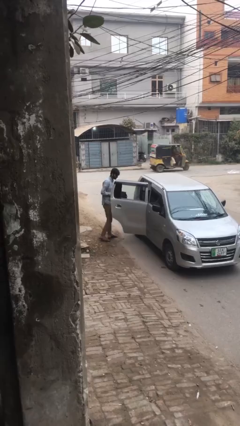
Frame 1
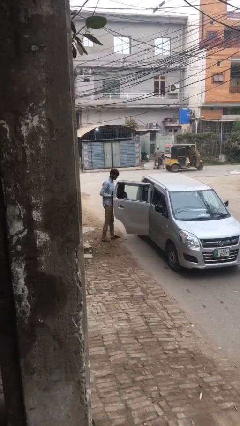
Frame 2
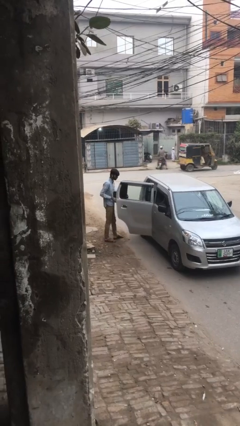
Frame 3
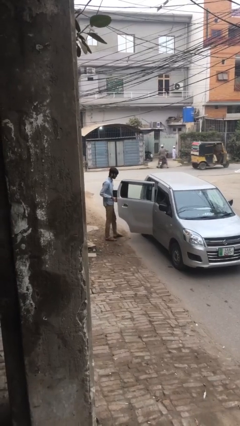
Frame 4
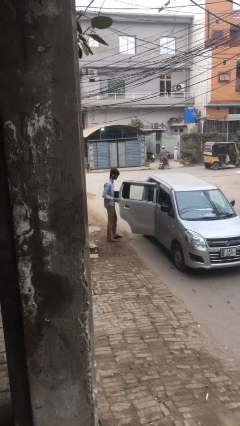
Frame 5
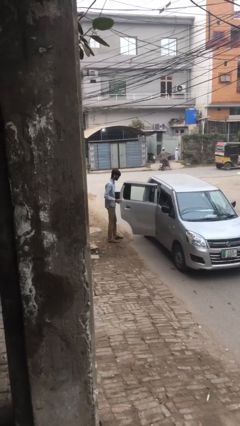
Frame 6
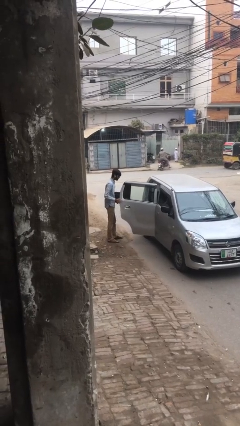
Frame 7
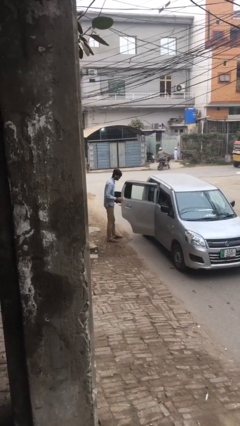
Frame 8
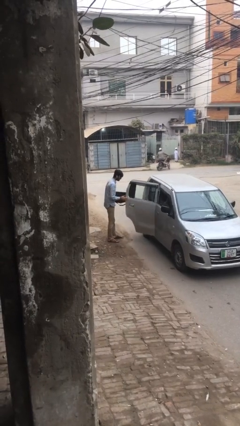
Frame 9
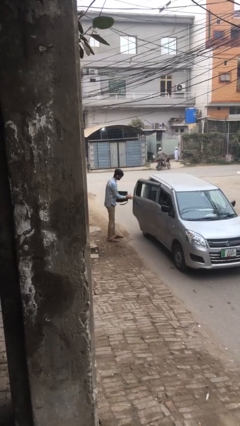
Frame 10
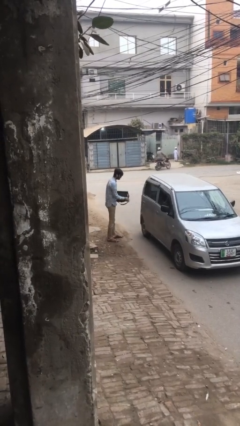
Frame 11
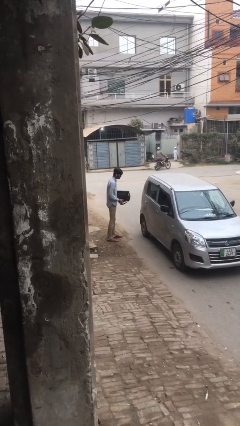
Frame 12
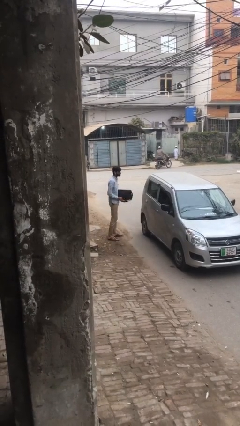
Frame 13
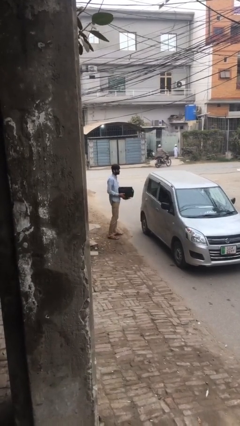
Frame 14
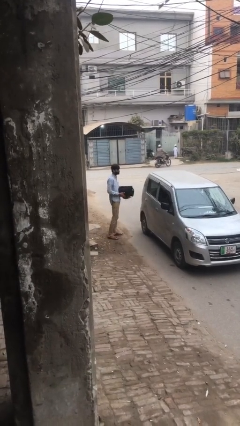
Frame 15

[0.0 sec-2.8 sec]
person closes car door

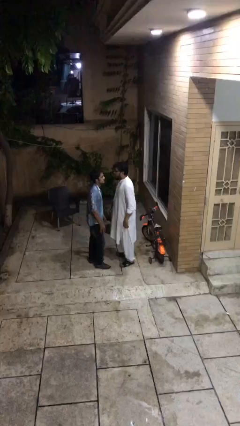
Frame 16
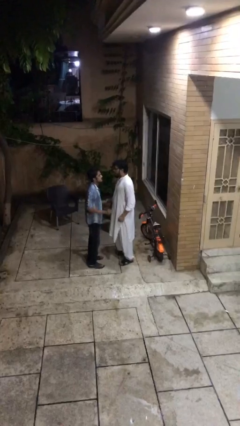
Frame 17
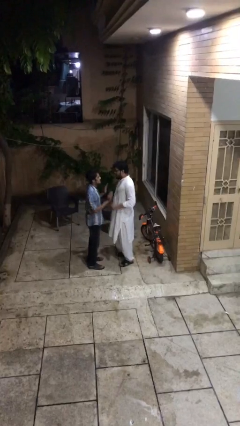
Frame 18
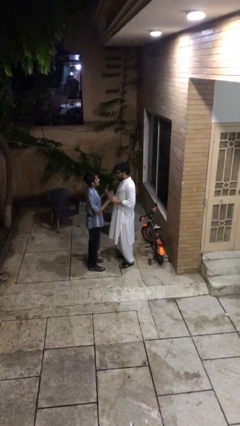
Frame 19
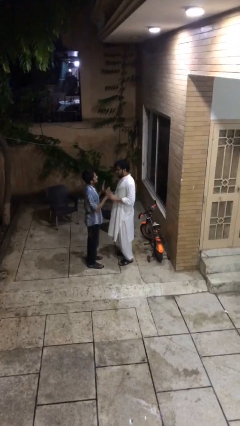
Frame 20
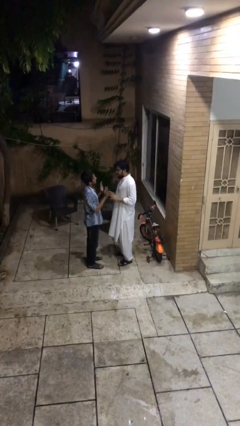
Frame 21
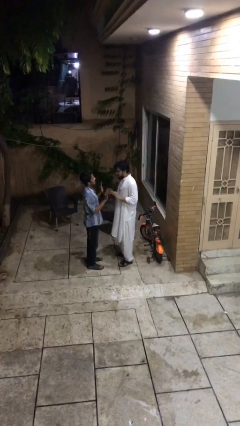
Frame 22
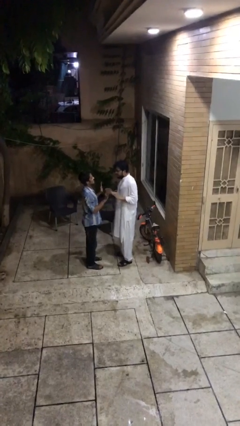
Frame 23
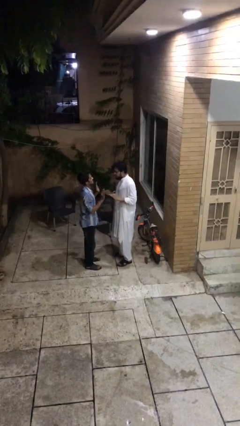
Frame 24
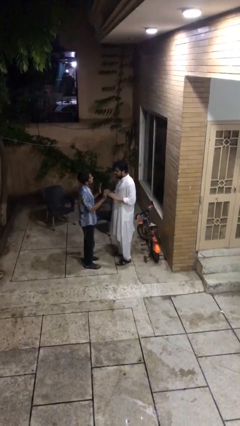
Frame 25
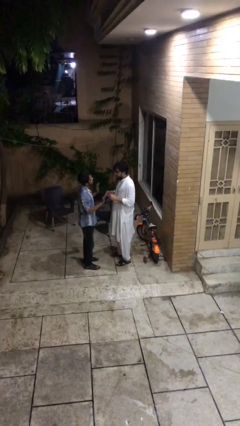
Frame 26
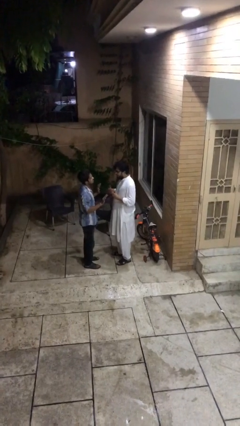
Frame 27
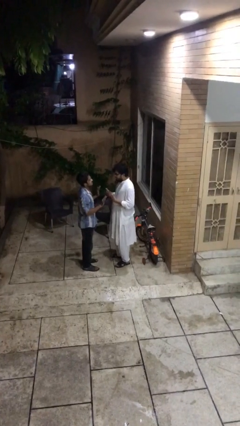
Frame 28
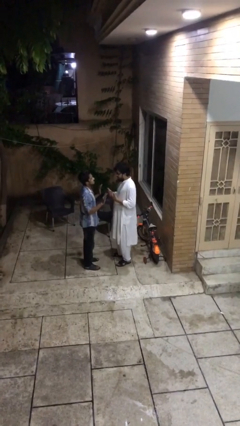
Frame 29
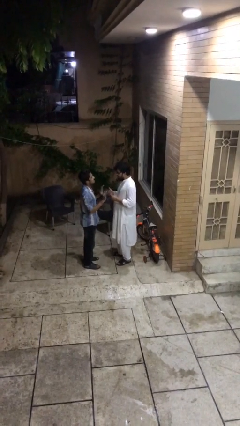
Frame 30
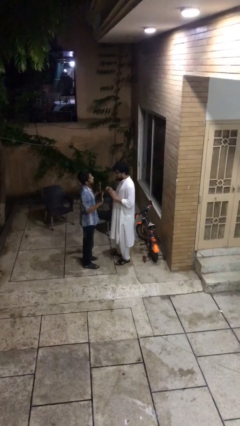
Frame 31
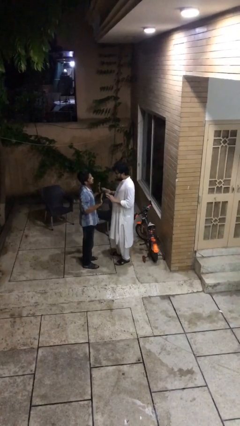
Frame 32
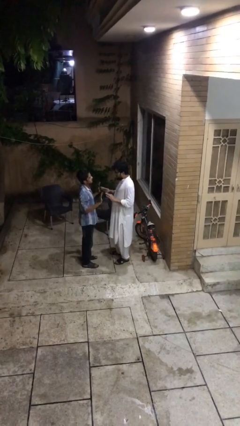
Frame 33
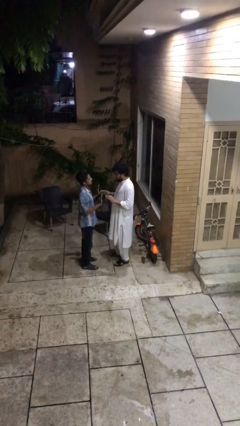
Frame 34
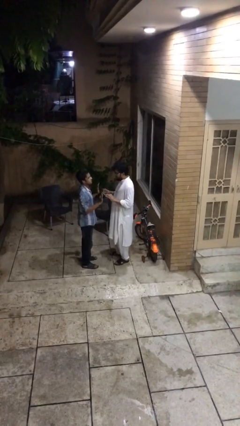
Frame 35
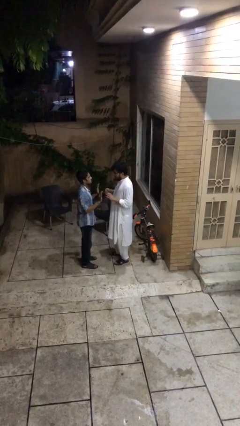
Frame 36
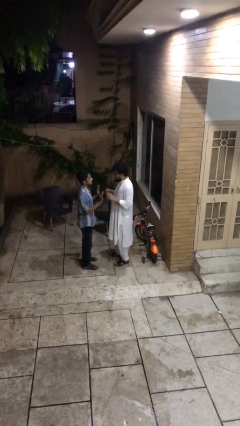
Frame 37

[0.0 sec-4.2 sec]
person talks to person

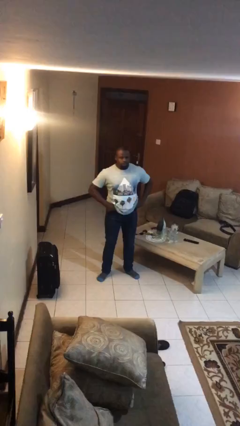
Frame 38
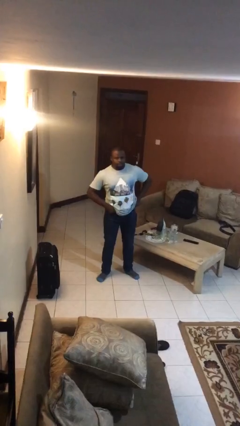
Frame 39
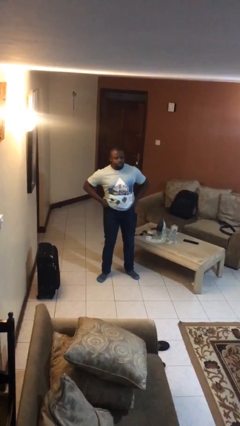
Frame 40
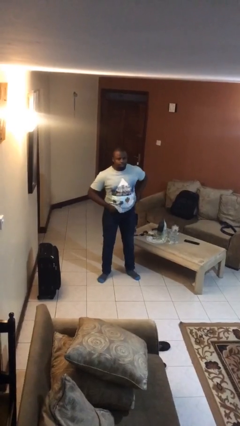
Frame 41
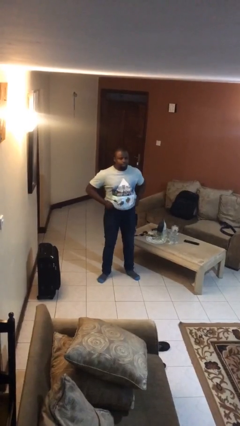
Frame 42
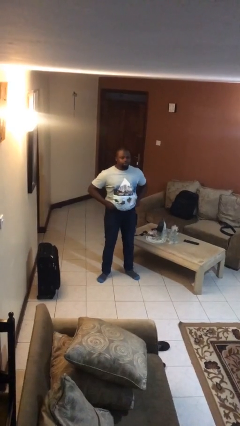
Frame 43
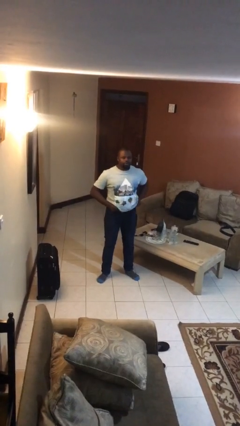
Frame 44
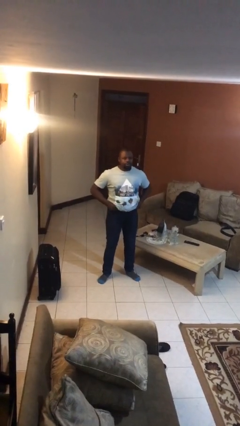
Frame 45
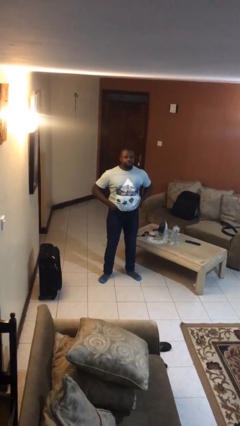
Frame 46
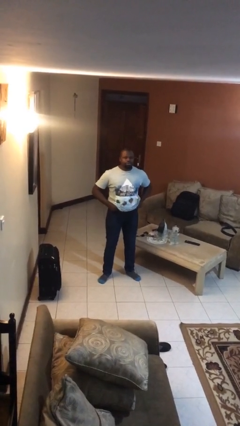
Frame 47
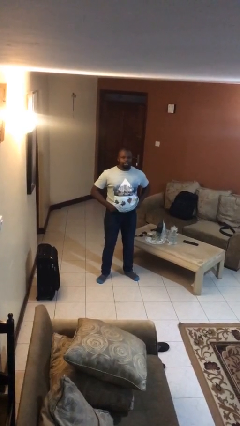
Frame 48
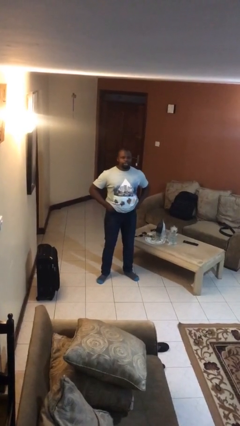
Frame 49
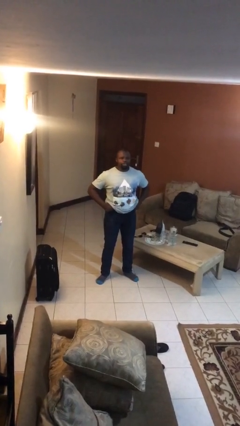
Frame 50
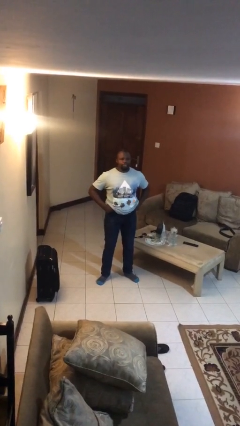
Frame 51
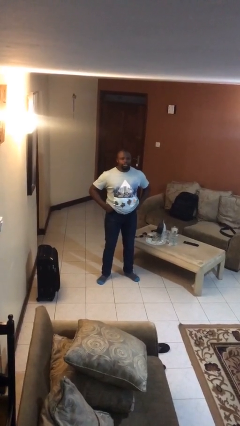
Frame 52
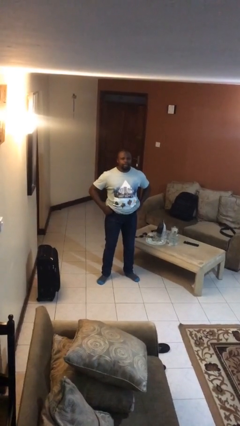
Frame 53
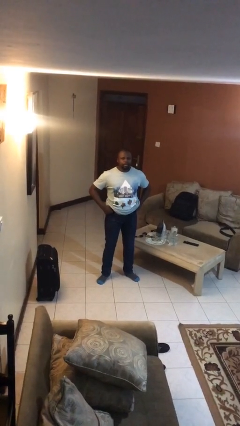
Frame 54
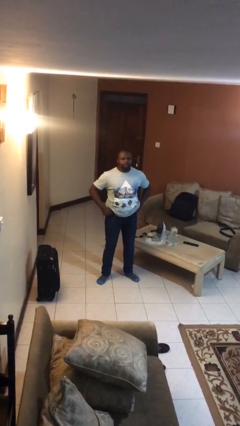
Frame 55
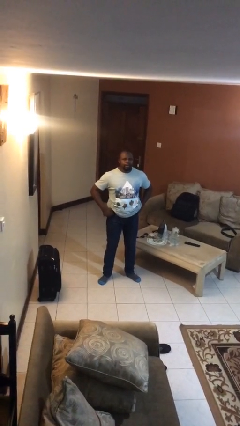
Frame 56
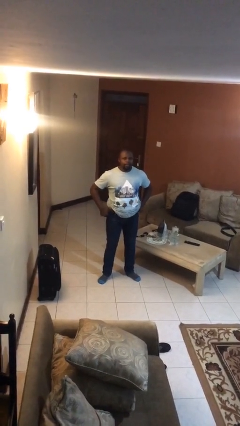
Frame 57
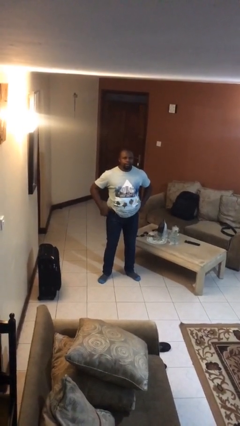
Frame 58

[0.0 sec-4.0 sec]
person hikes up pants

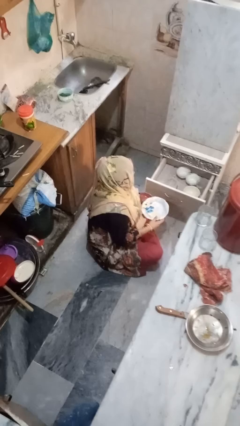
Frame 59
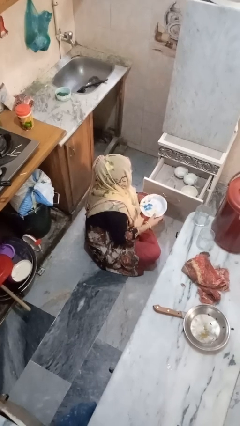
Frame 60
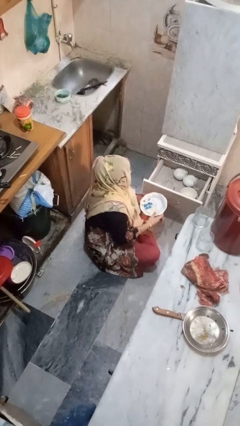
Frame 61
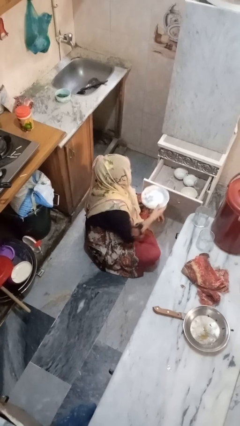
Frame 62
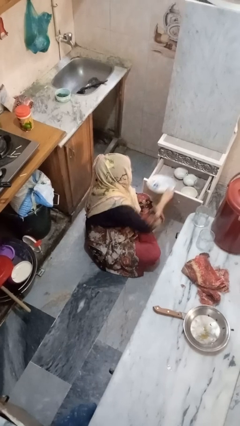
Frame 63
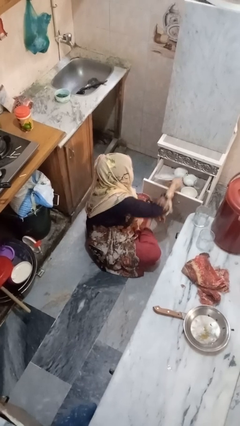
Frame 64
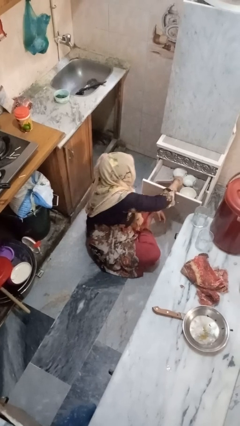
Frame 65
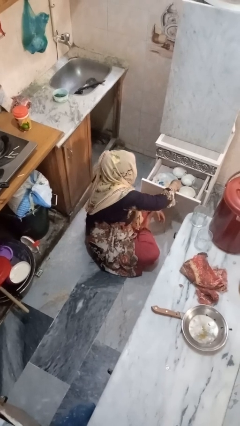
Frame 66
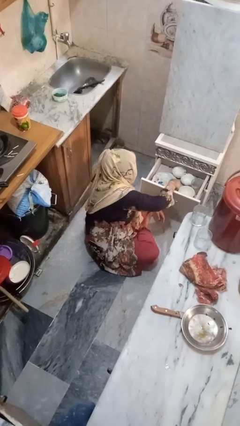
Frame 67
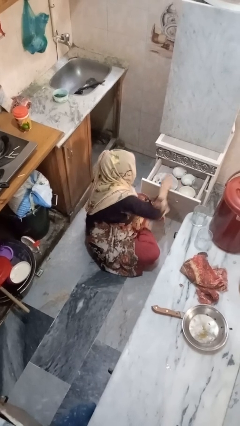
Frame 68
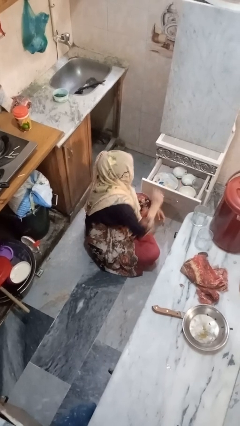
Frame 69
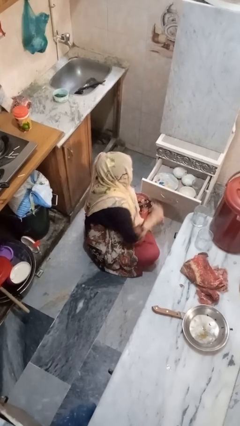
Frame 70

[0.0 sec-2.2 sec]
person puts object into kitchen drawer

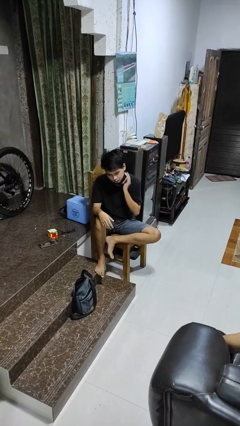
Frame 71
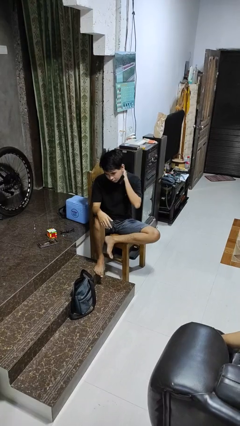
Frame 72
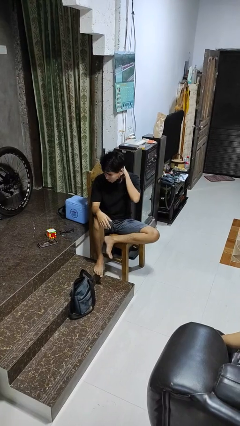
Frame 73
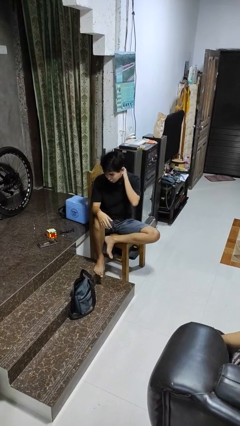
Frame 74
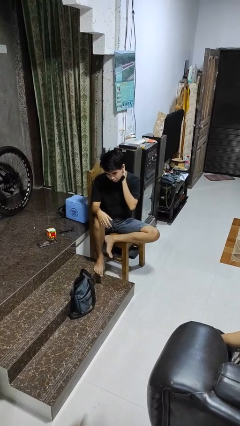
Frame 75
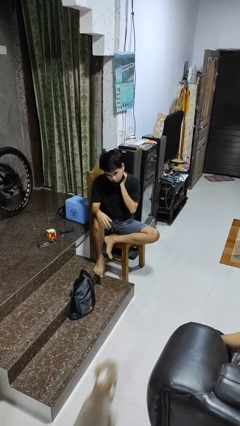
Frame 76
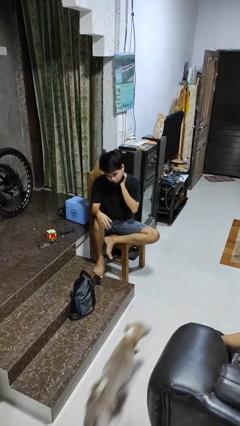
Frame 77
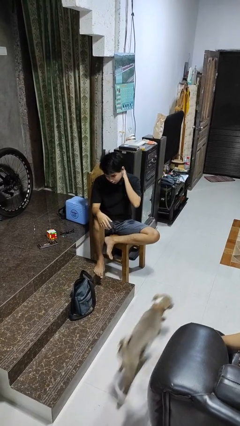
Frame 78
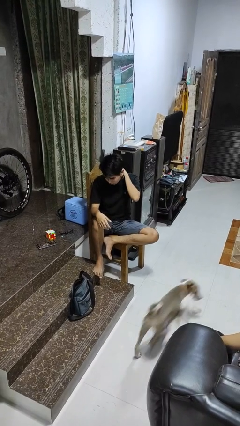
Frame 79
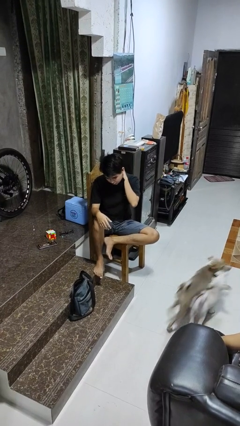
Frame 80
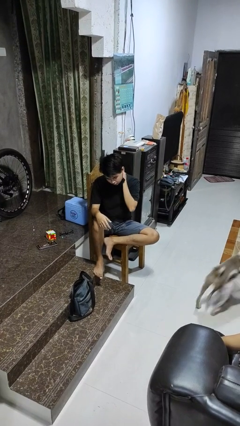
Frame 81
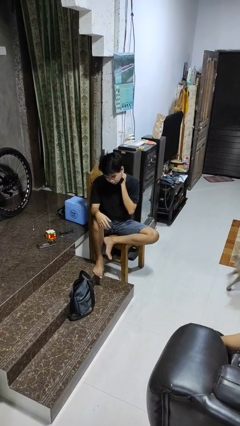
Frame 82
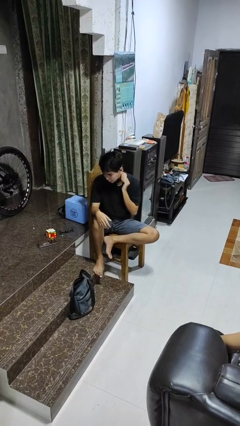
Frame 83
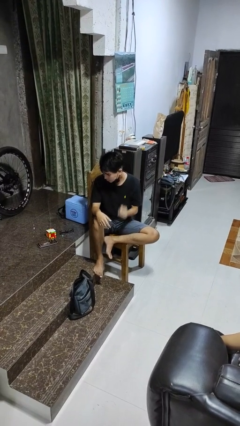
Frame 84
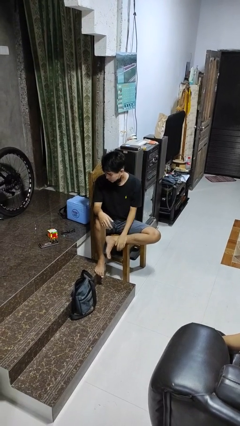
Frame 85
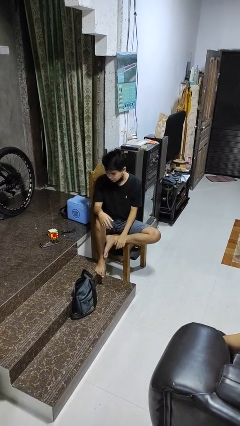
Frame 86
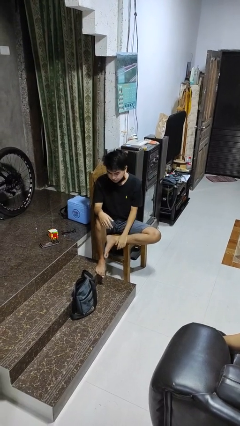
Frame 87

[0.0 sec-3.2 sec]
person rubs neck

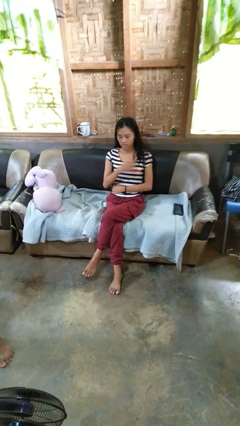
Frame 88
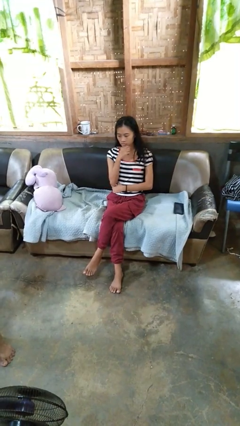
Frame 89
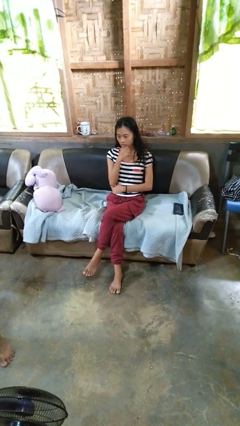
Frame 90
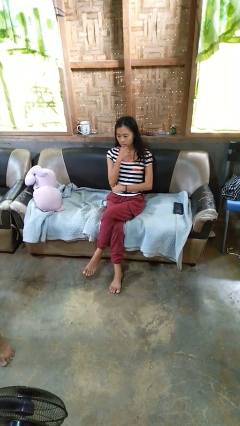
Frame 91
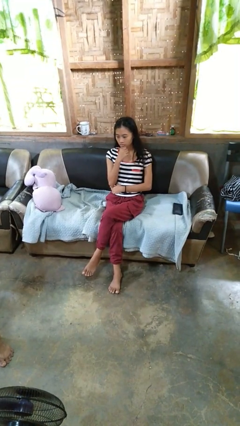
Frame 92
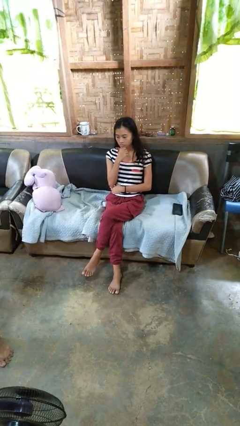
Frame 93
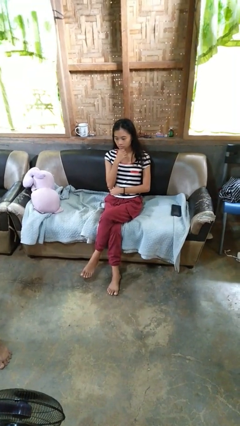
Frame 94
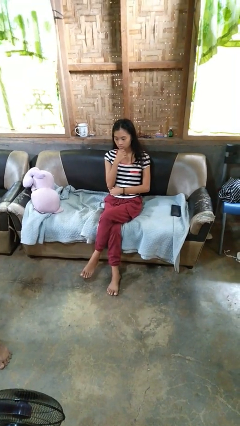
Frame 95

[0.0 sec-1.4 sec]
person strokes chin
